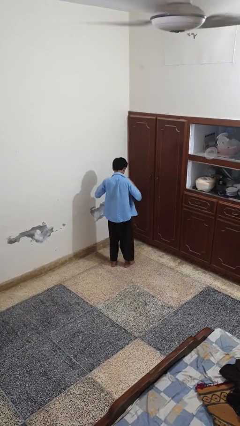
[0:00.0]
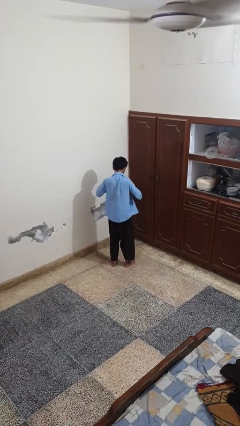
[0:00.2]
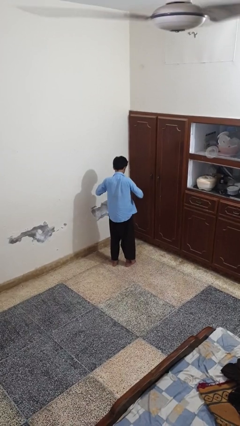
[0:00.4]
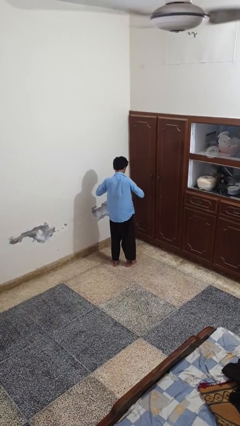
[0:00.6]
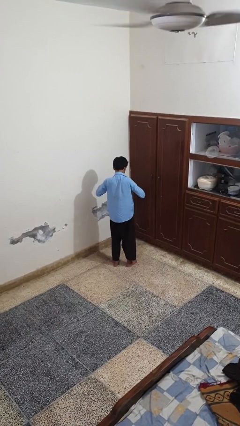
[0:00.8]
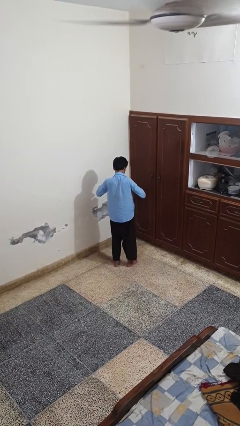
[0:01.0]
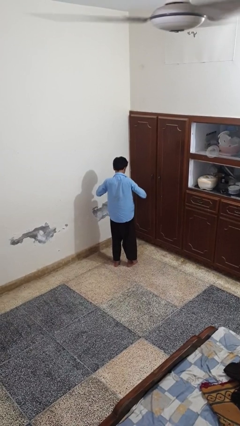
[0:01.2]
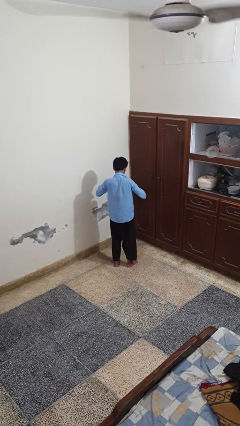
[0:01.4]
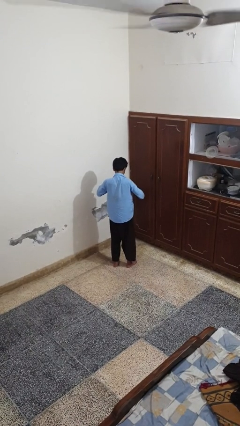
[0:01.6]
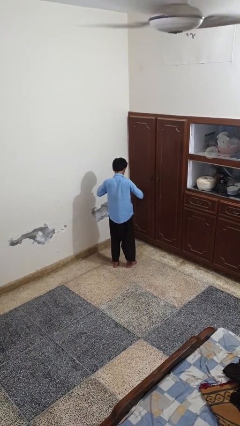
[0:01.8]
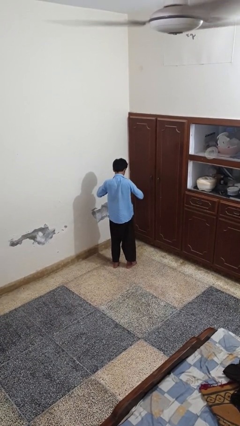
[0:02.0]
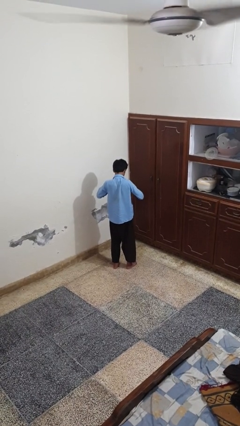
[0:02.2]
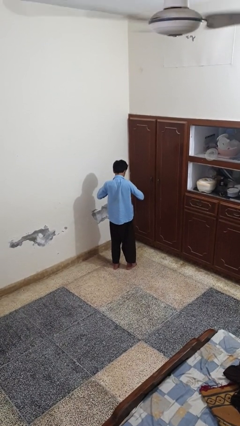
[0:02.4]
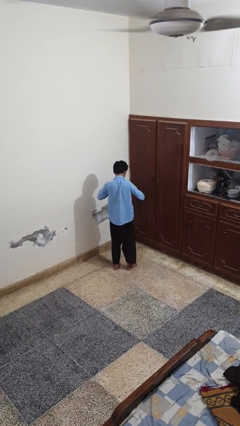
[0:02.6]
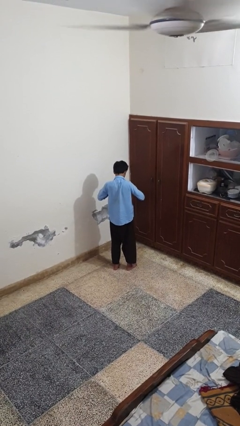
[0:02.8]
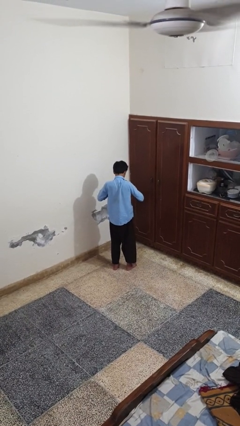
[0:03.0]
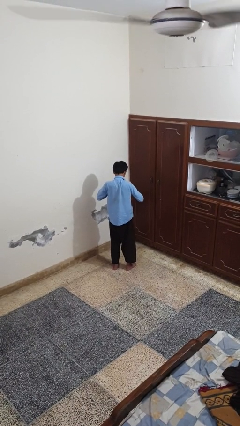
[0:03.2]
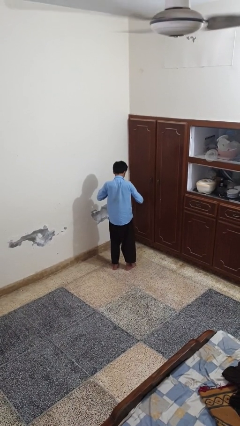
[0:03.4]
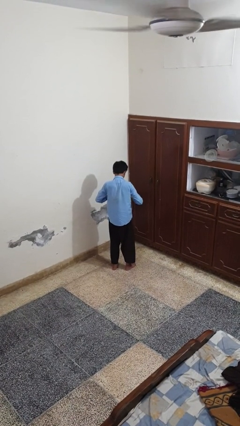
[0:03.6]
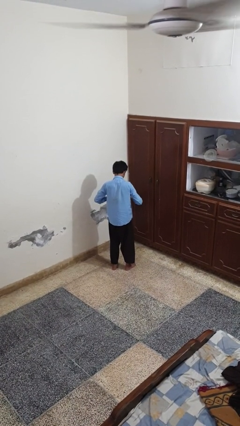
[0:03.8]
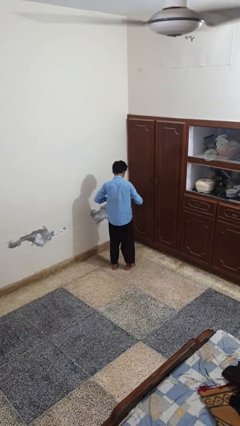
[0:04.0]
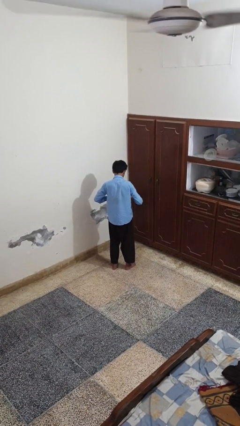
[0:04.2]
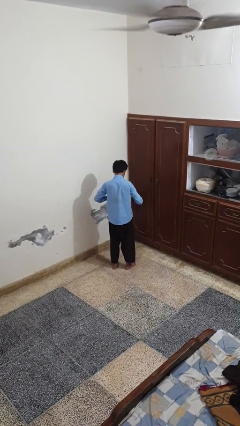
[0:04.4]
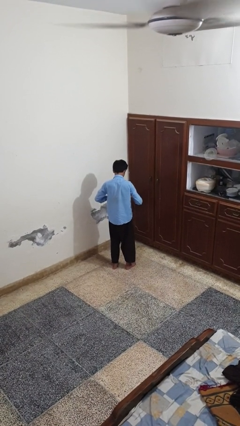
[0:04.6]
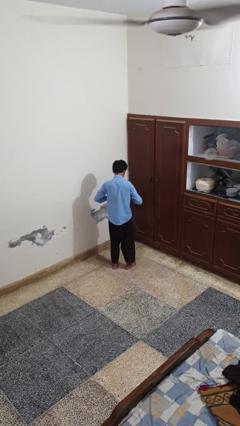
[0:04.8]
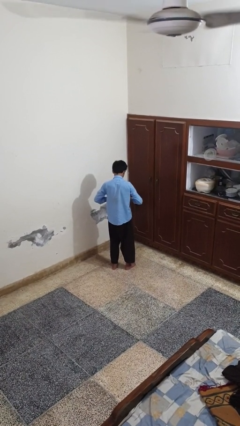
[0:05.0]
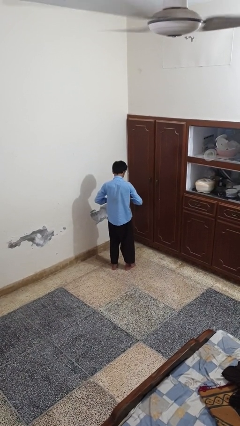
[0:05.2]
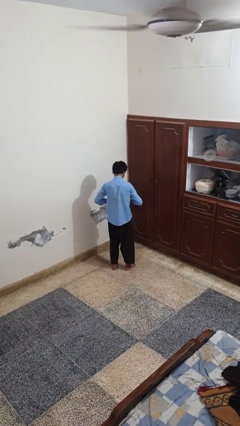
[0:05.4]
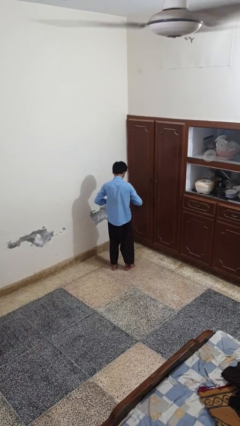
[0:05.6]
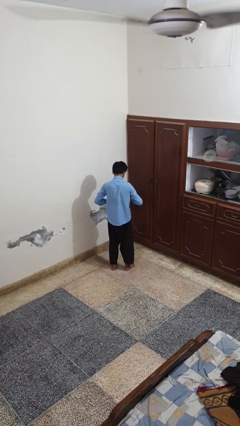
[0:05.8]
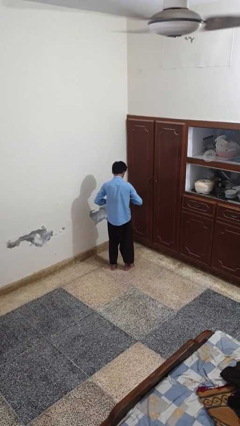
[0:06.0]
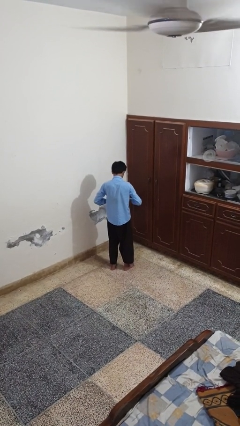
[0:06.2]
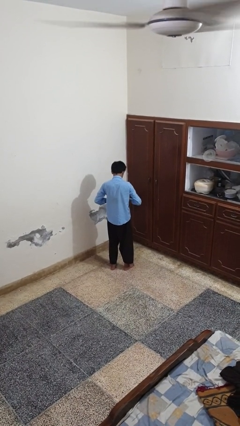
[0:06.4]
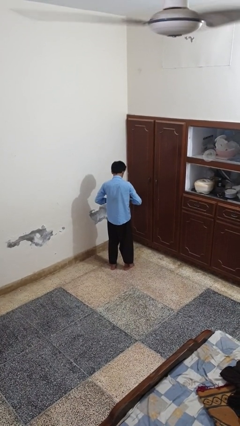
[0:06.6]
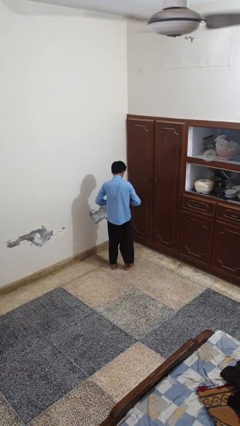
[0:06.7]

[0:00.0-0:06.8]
person buttons shirt

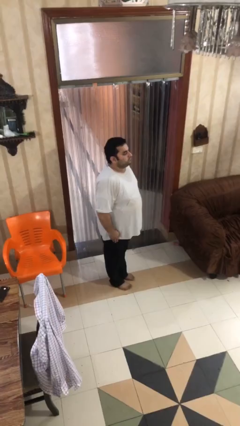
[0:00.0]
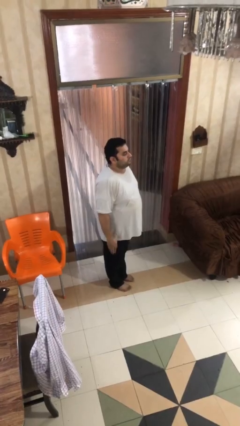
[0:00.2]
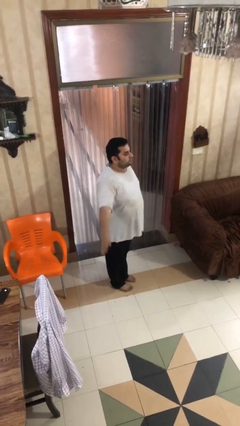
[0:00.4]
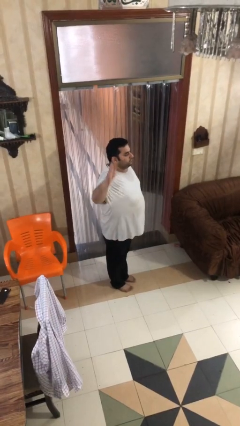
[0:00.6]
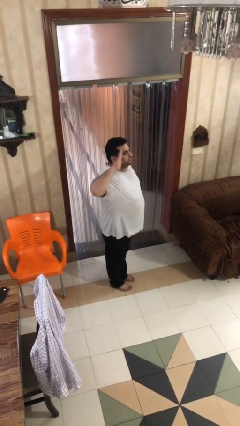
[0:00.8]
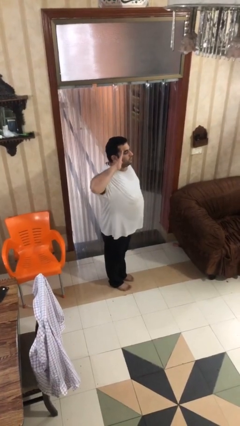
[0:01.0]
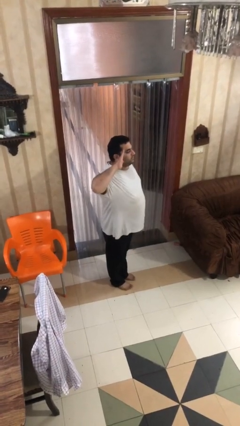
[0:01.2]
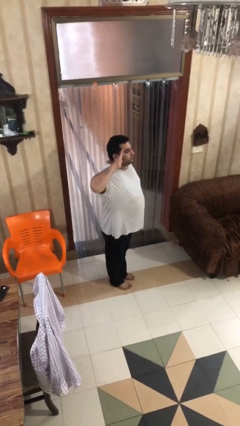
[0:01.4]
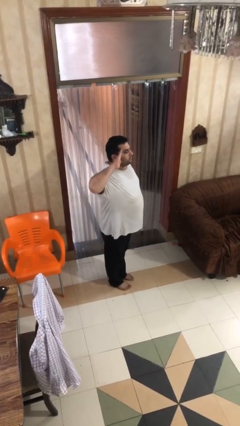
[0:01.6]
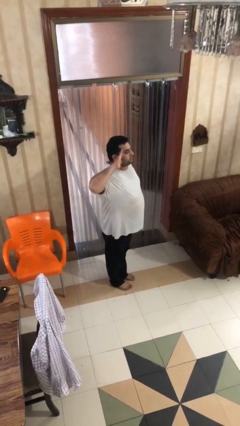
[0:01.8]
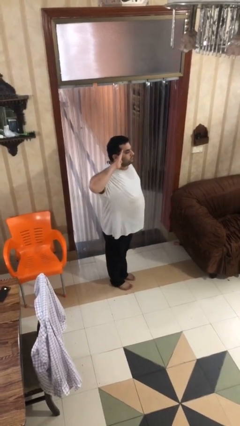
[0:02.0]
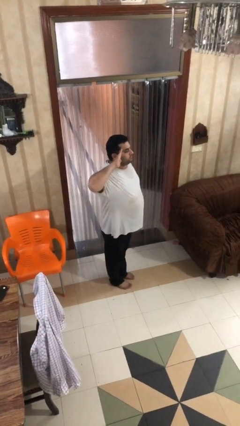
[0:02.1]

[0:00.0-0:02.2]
person salutes

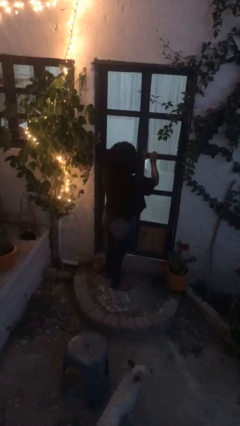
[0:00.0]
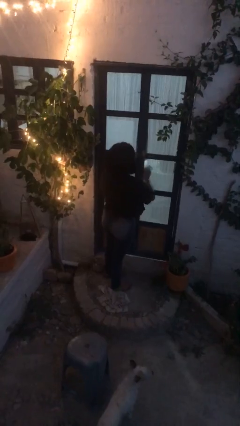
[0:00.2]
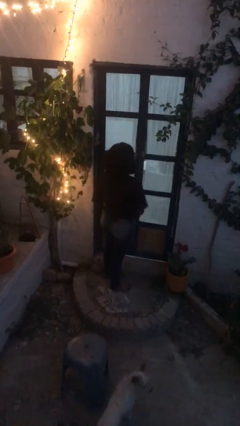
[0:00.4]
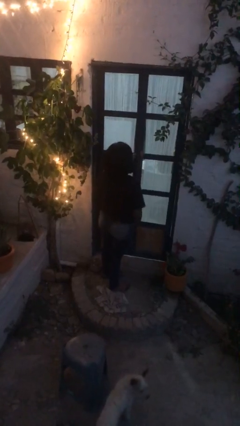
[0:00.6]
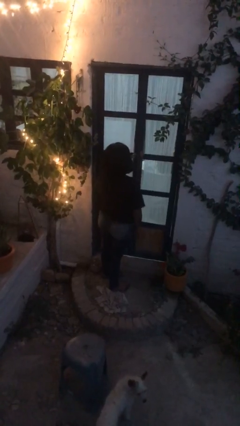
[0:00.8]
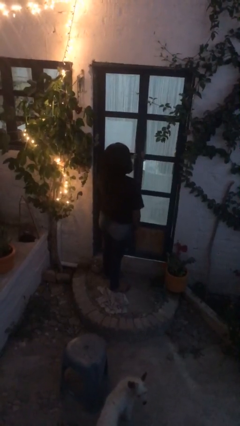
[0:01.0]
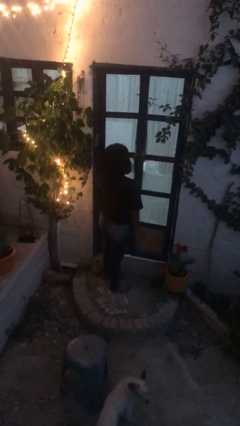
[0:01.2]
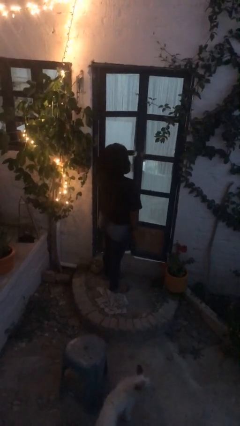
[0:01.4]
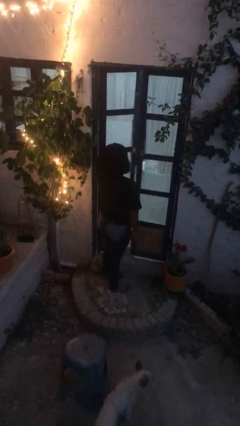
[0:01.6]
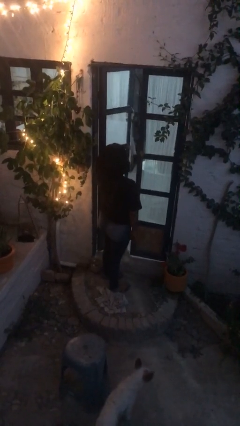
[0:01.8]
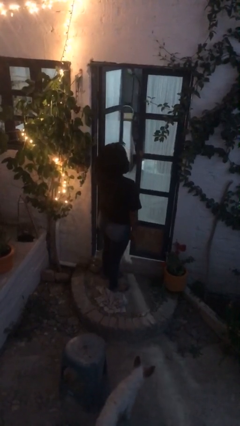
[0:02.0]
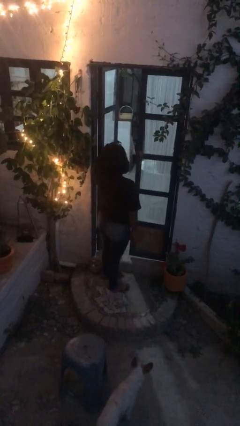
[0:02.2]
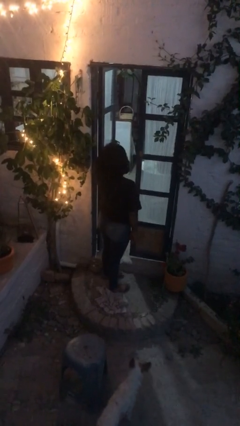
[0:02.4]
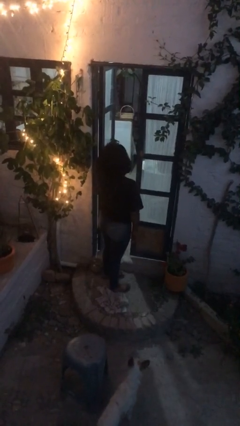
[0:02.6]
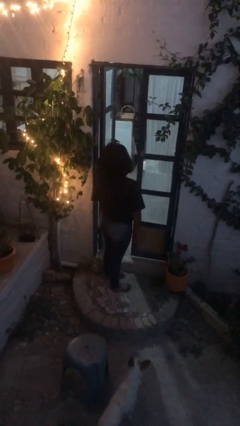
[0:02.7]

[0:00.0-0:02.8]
person opens facility door

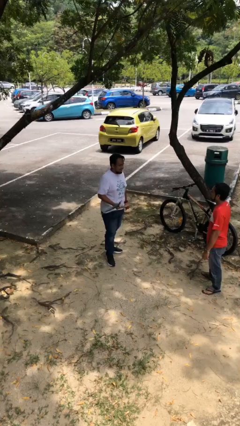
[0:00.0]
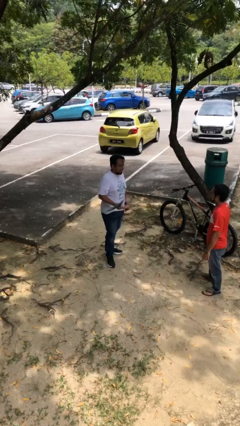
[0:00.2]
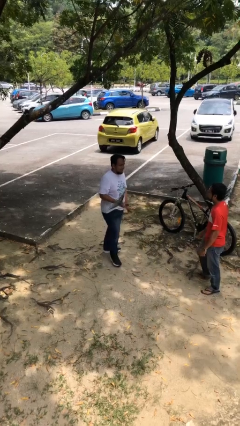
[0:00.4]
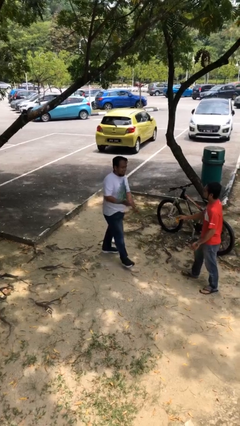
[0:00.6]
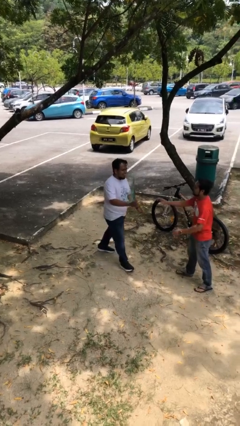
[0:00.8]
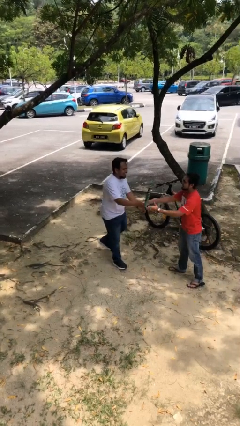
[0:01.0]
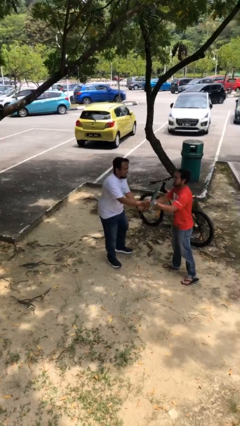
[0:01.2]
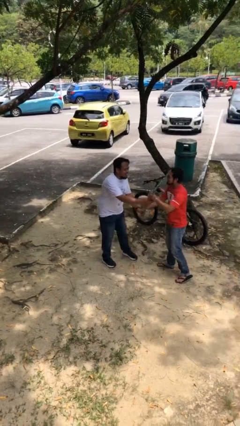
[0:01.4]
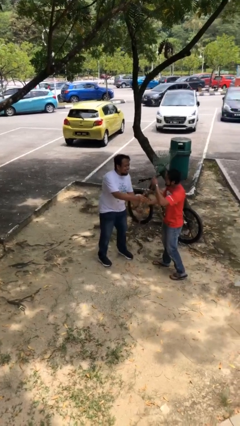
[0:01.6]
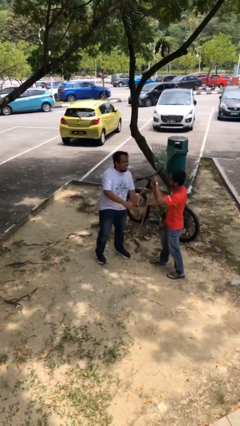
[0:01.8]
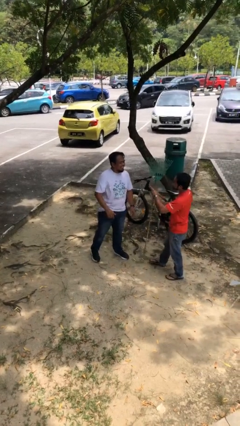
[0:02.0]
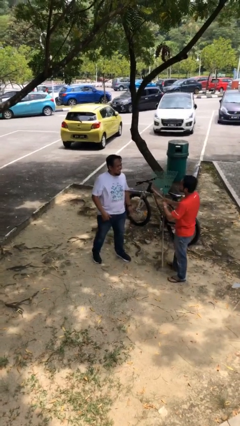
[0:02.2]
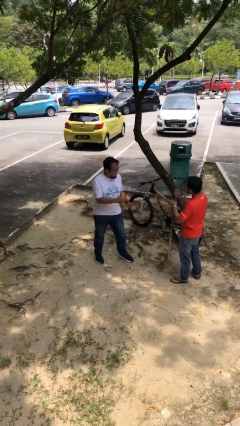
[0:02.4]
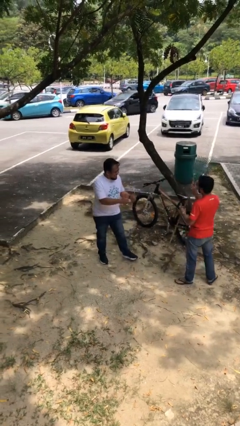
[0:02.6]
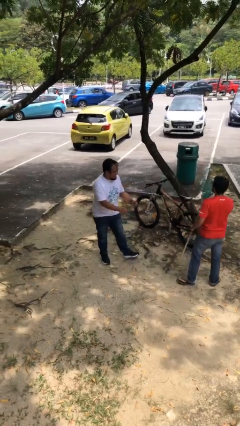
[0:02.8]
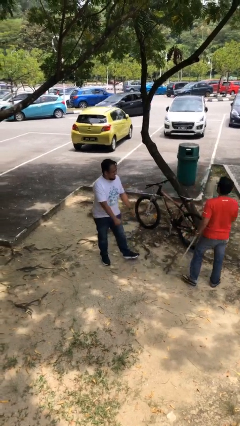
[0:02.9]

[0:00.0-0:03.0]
person transfers object to person

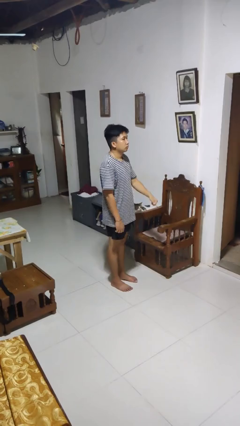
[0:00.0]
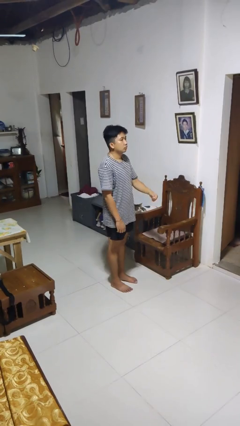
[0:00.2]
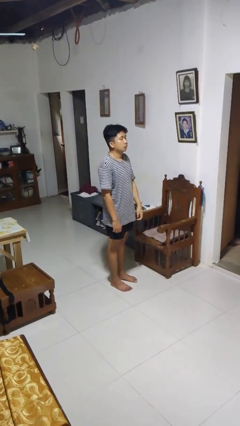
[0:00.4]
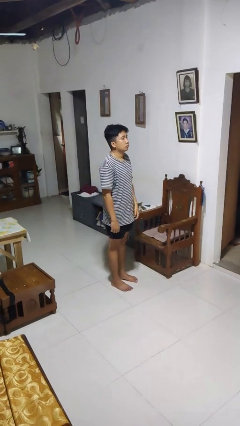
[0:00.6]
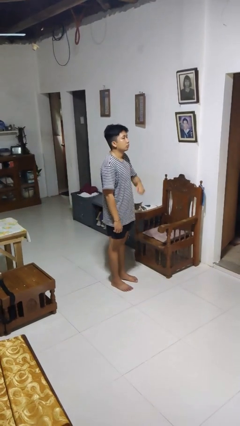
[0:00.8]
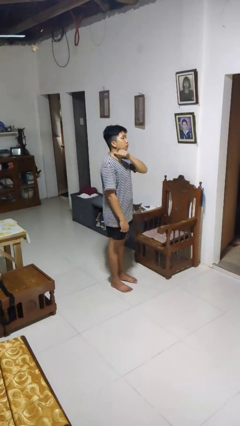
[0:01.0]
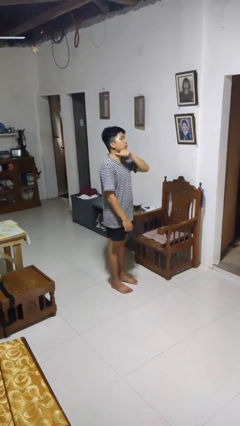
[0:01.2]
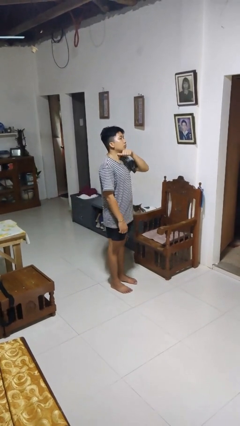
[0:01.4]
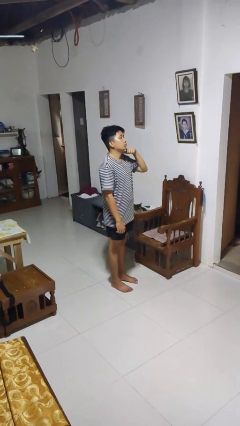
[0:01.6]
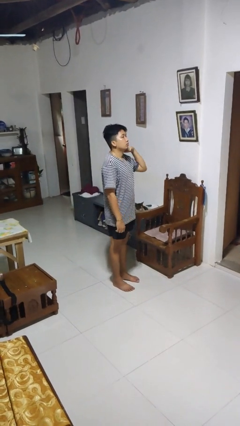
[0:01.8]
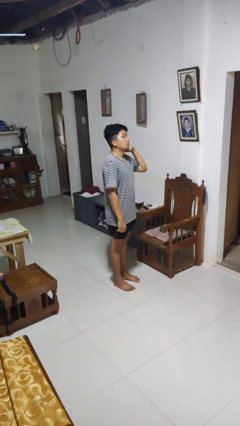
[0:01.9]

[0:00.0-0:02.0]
person gestures cut

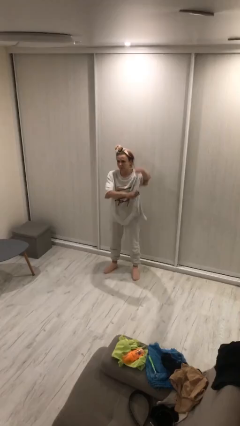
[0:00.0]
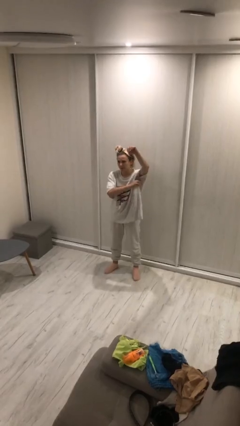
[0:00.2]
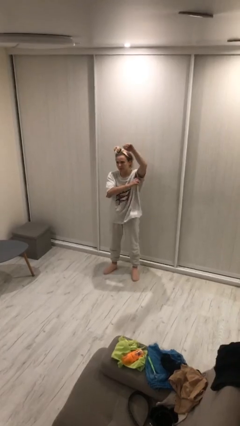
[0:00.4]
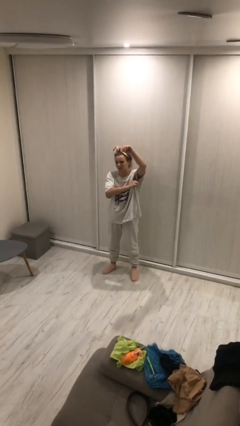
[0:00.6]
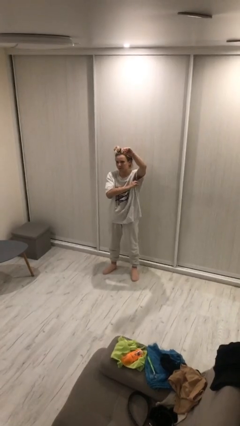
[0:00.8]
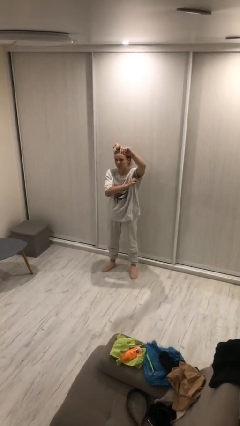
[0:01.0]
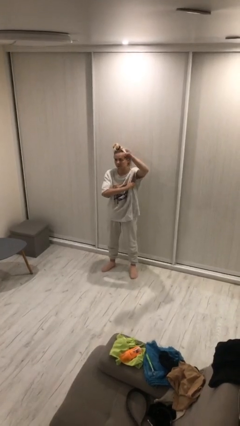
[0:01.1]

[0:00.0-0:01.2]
person applies deodorant
